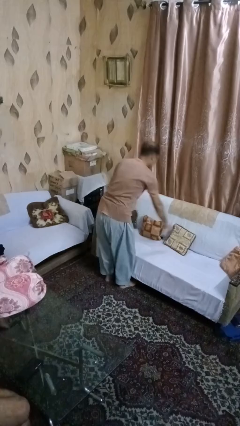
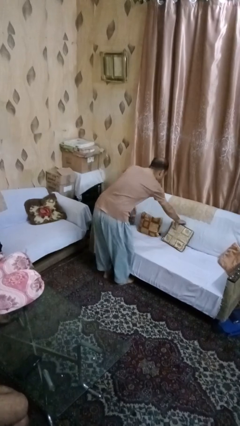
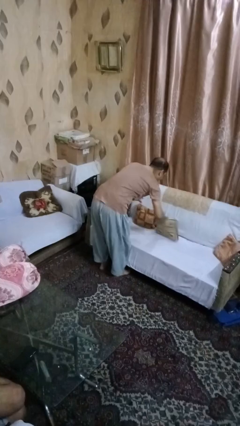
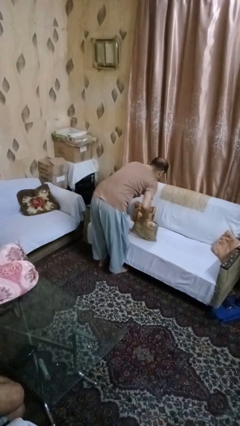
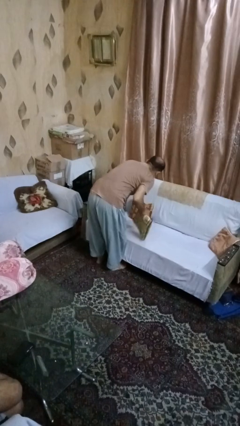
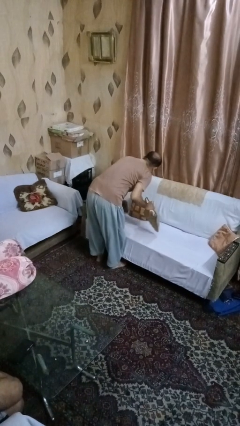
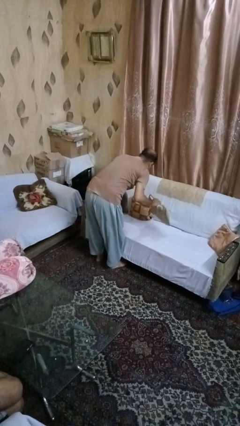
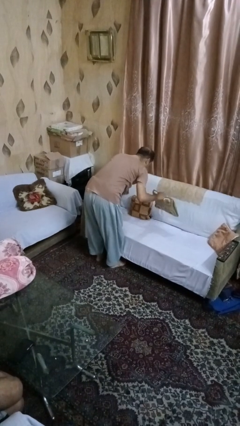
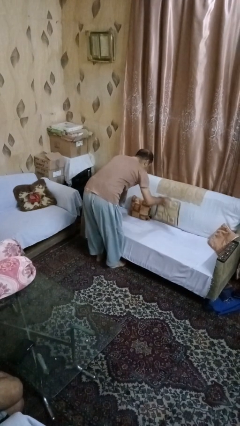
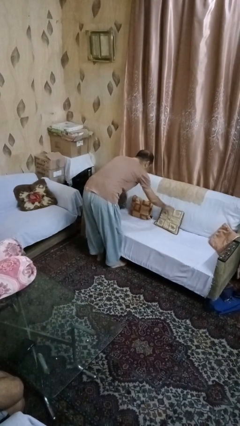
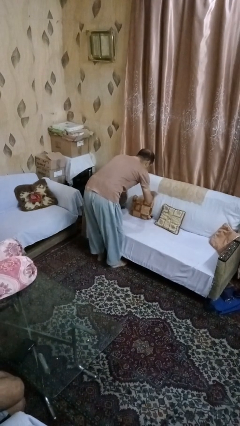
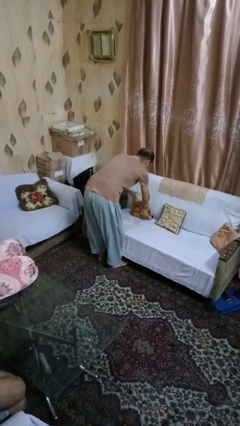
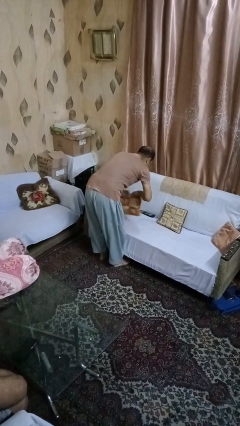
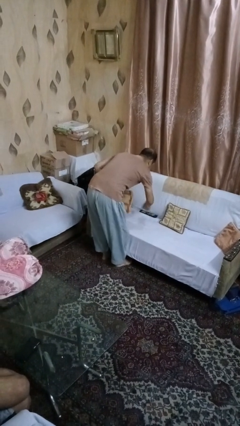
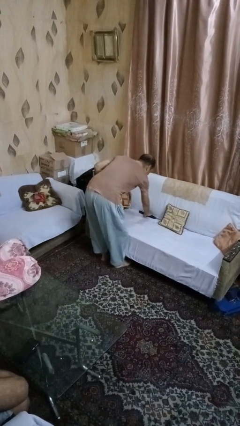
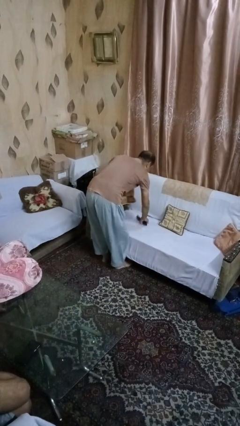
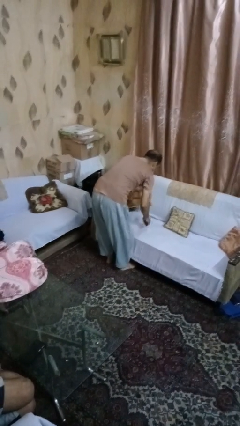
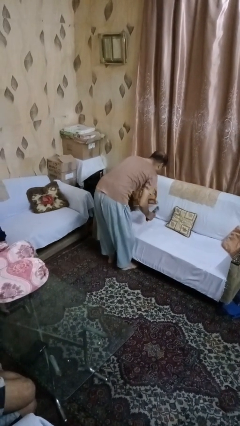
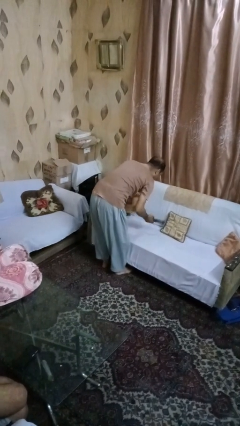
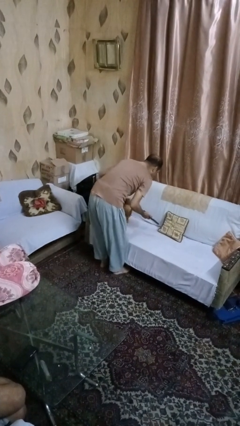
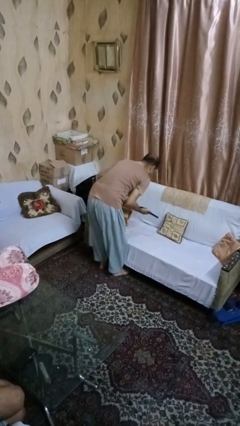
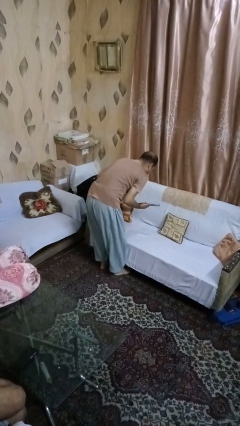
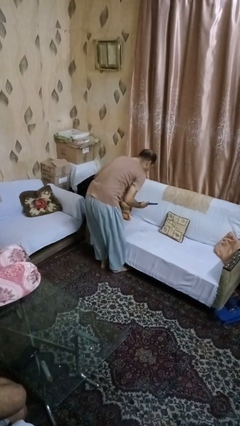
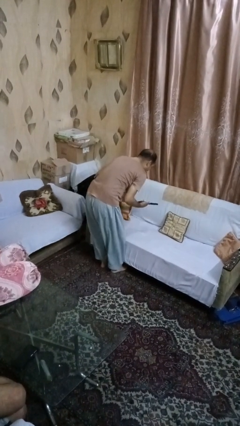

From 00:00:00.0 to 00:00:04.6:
person searches in couch

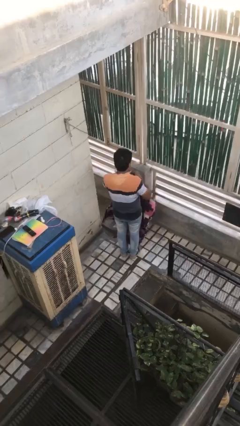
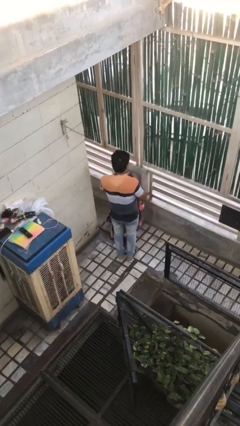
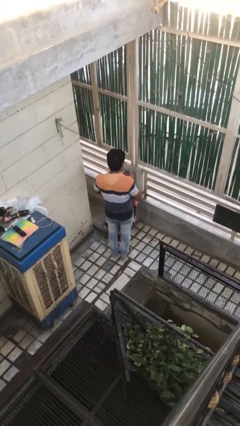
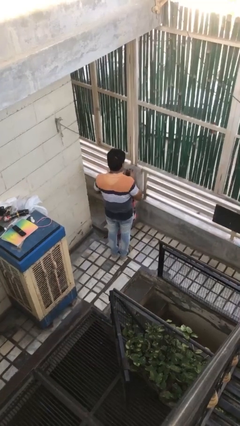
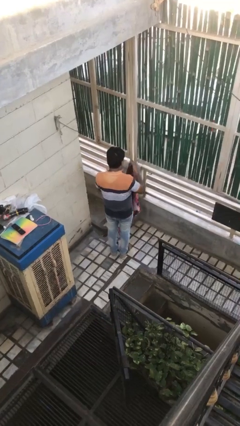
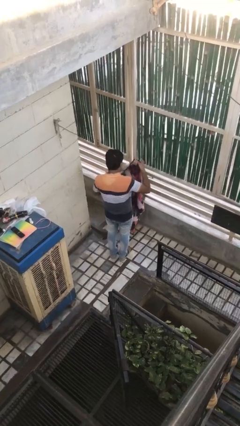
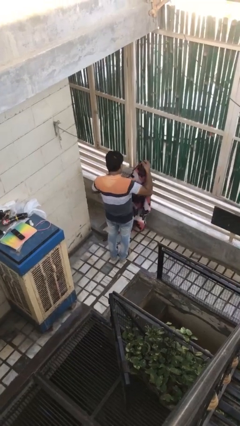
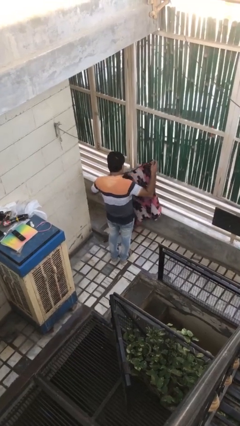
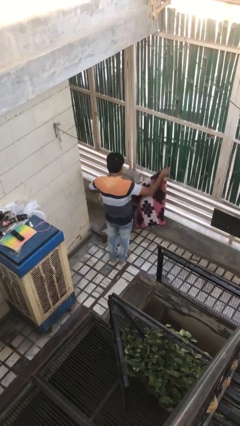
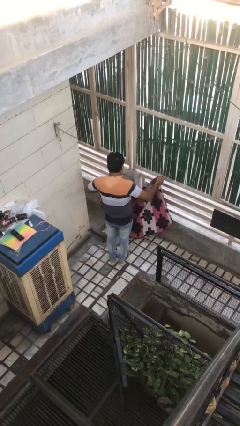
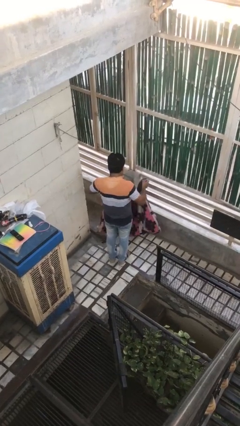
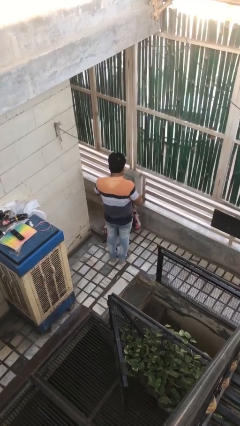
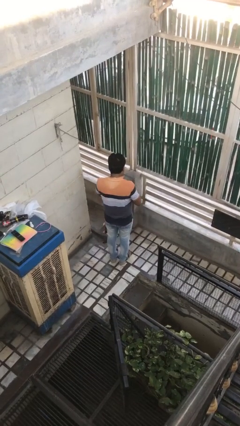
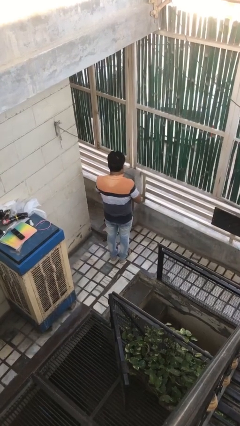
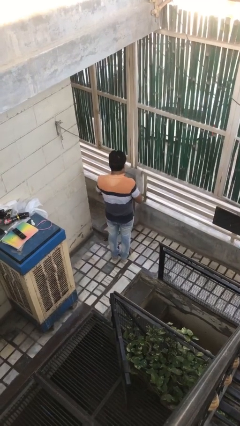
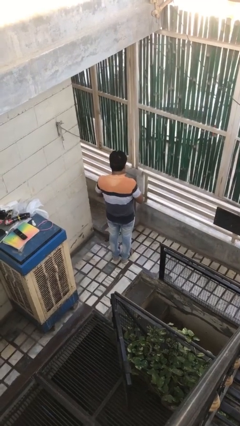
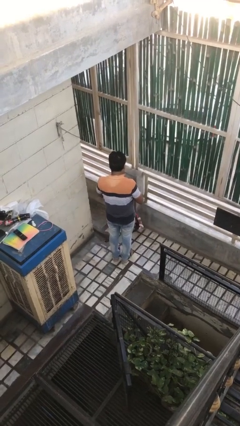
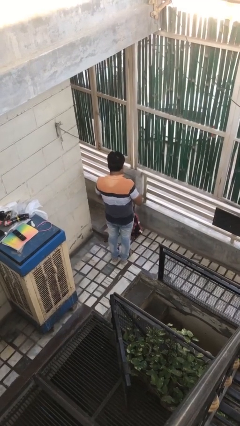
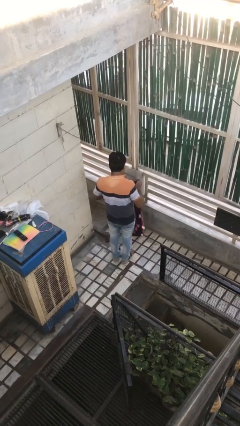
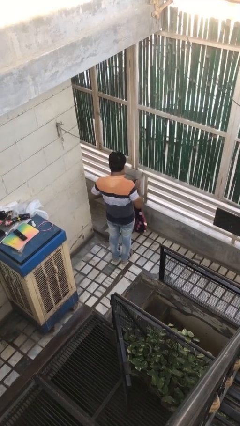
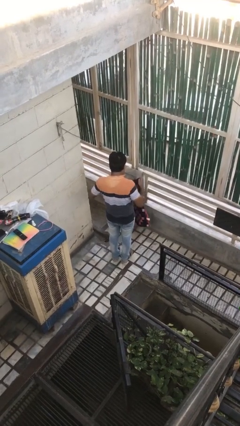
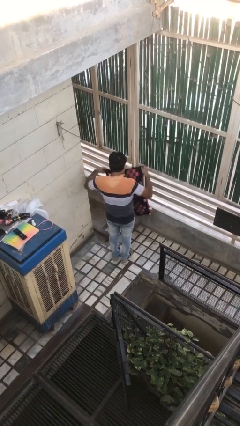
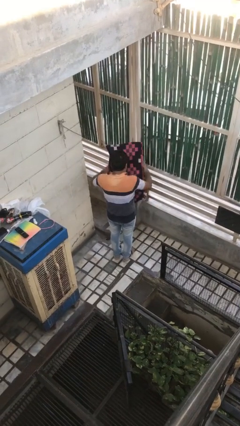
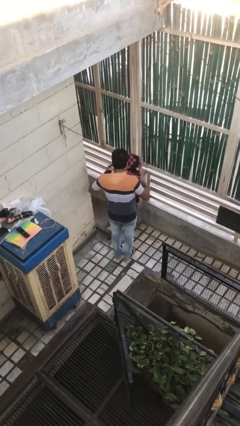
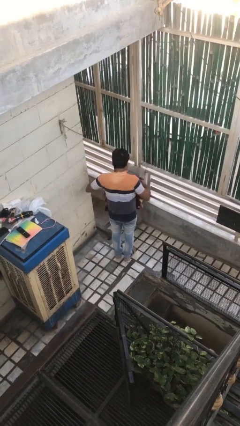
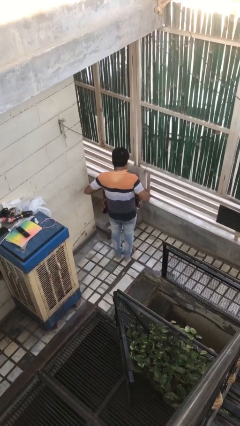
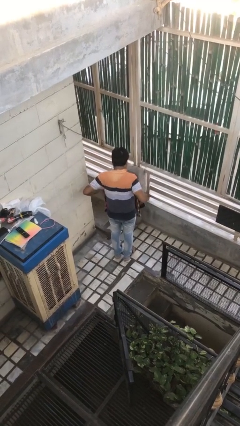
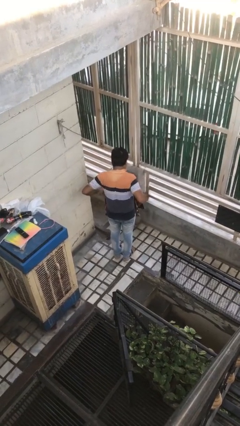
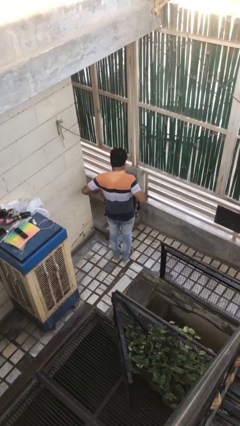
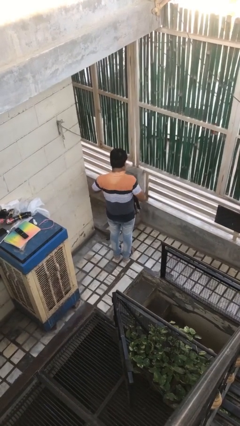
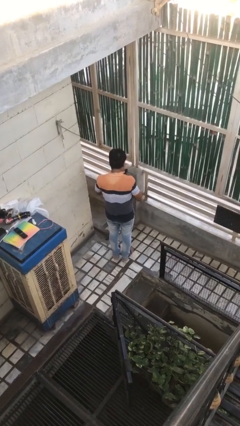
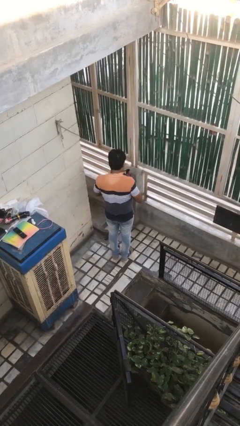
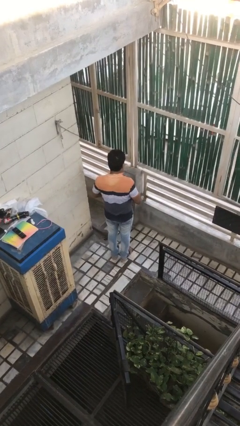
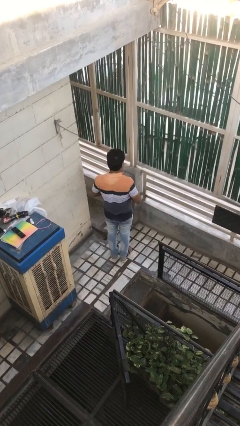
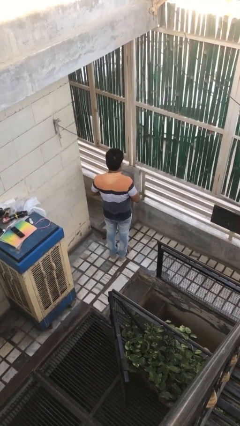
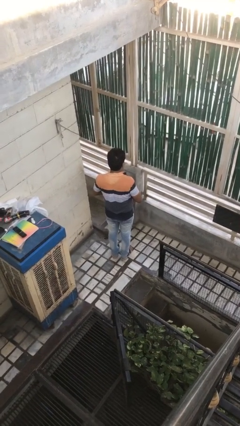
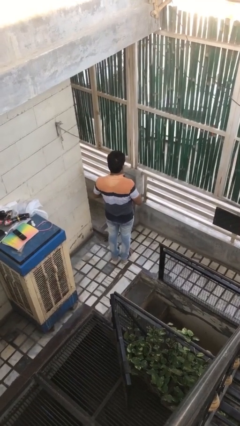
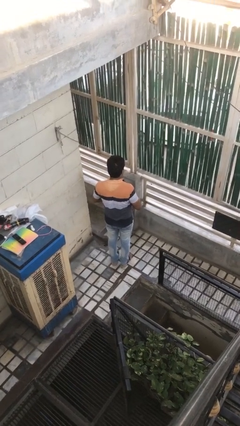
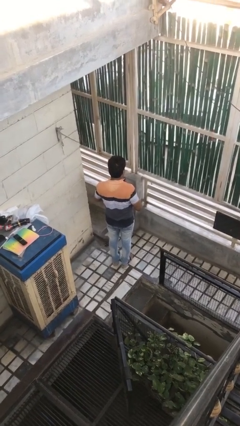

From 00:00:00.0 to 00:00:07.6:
person folds blanket

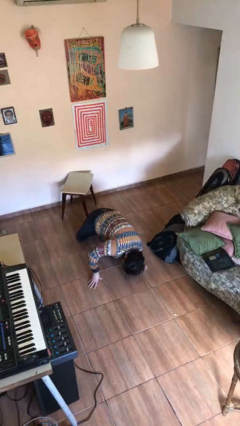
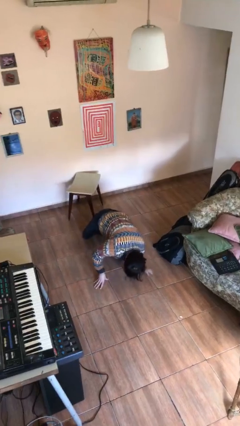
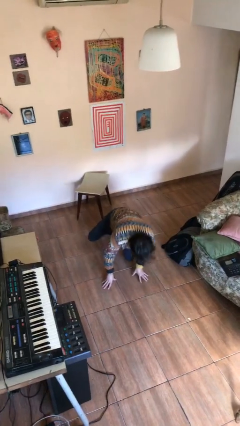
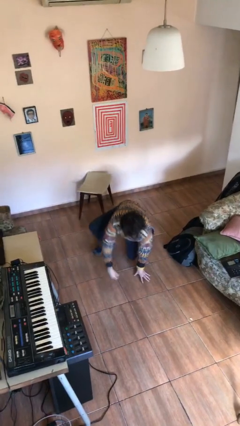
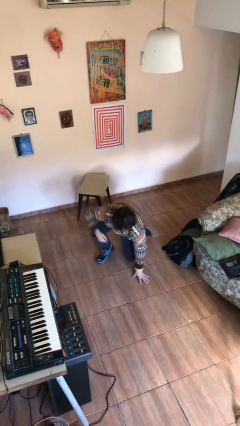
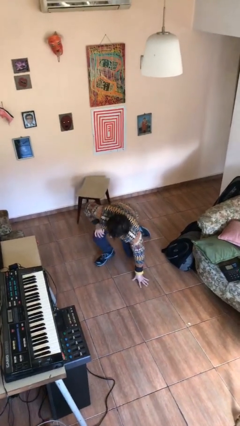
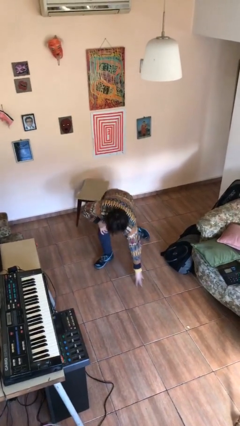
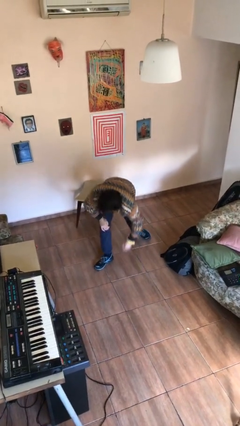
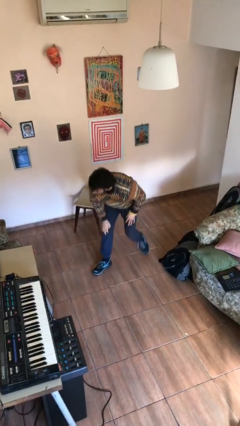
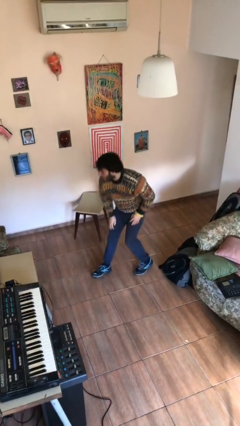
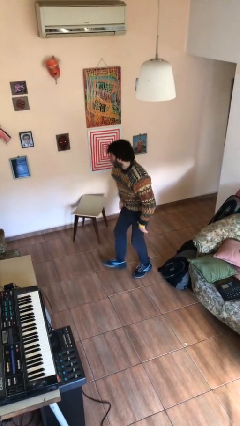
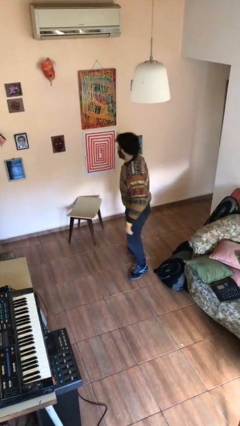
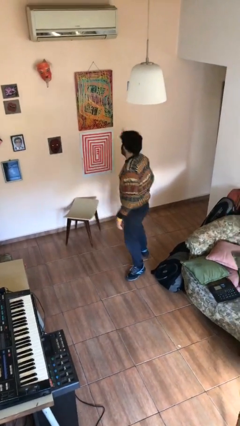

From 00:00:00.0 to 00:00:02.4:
person stands up from floor

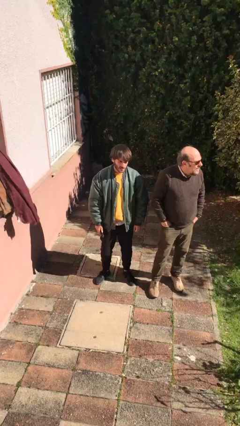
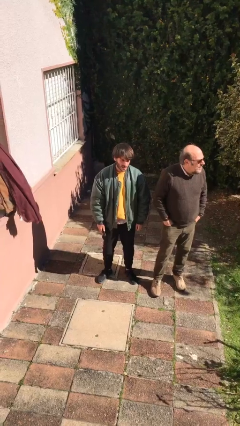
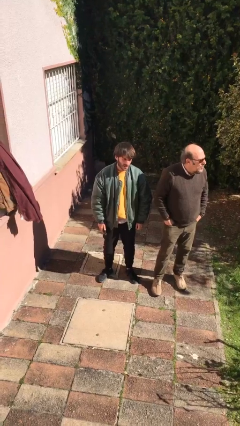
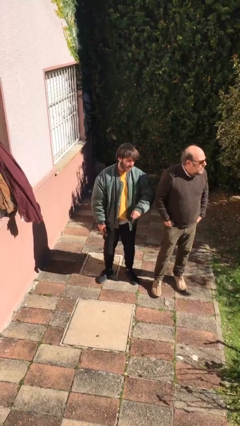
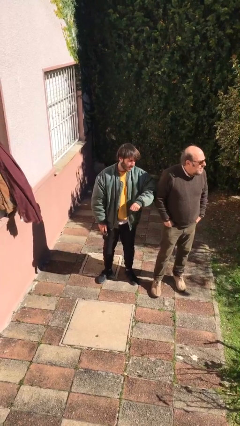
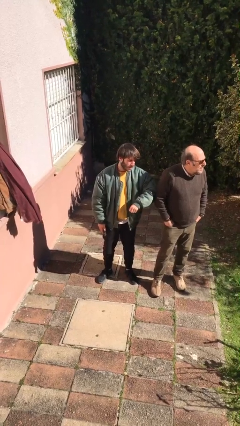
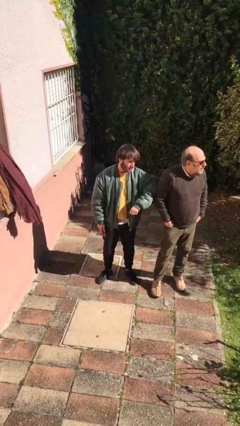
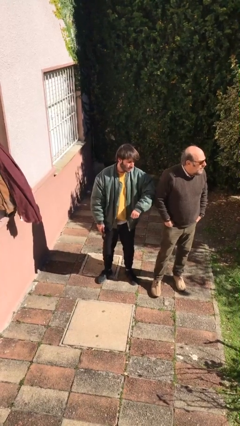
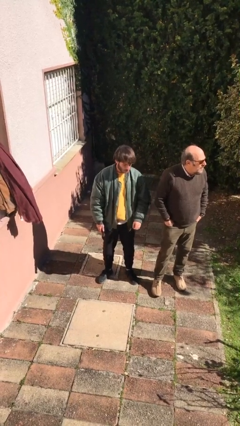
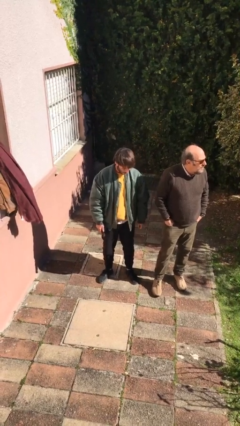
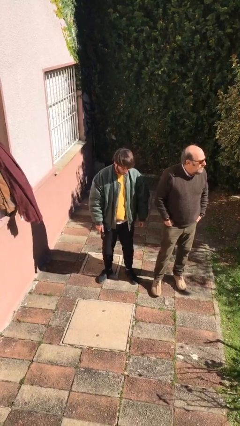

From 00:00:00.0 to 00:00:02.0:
person nudges person with elbow

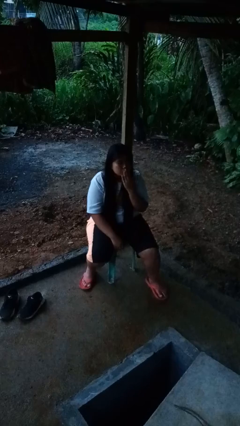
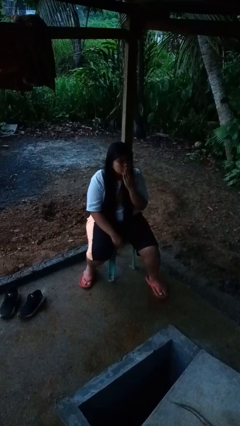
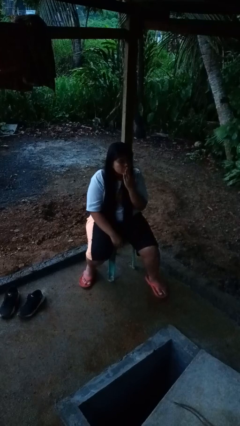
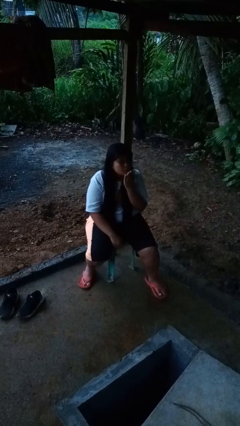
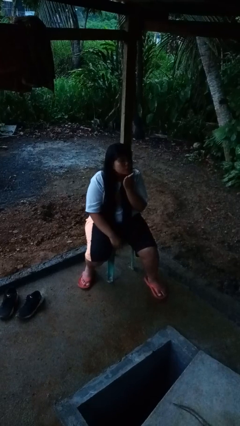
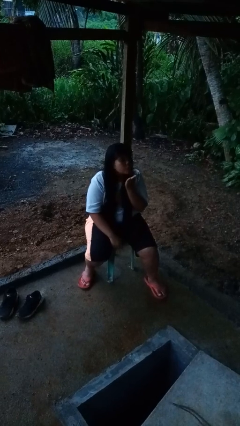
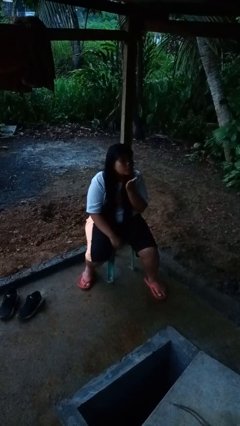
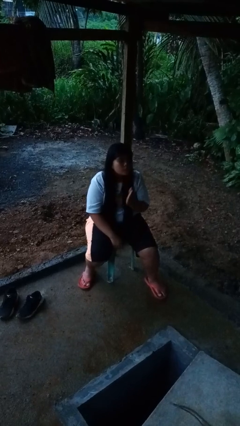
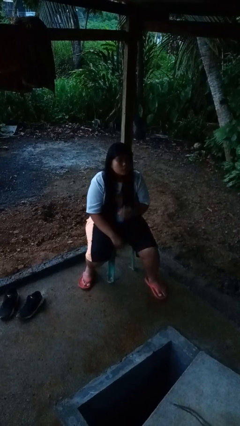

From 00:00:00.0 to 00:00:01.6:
person gestures blow kiss
